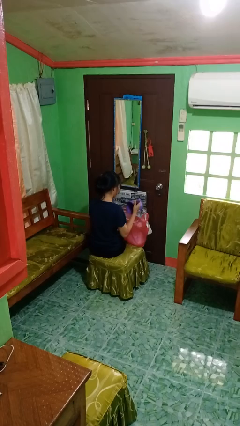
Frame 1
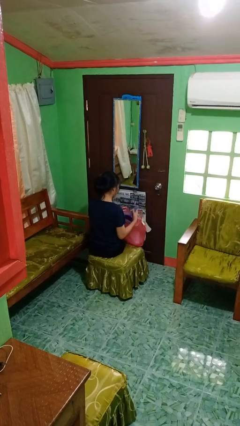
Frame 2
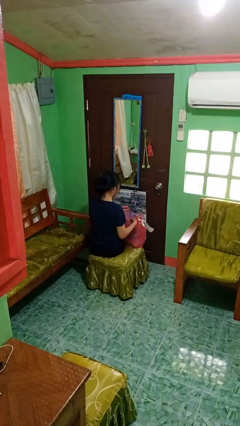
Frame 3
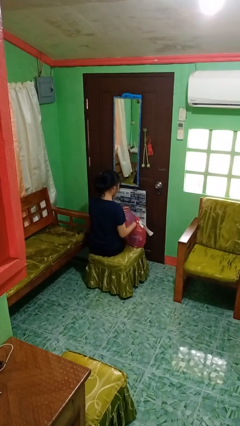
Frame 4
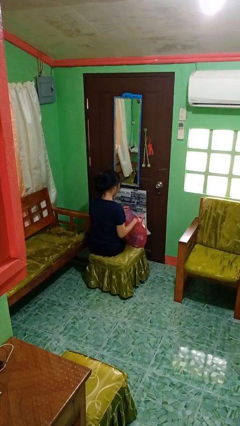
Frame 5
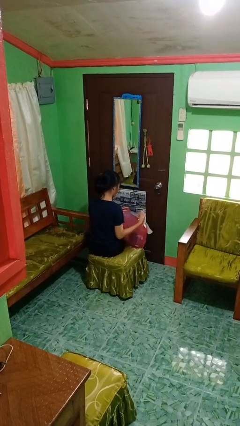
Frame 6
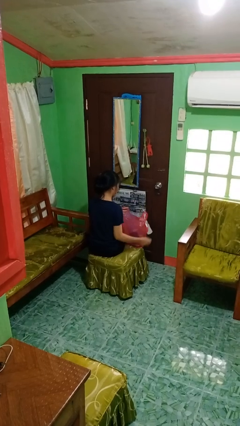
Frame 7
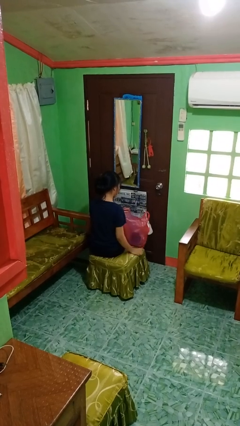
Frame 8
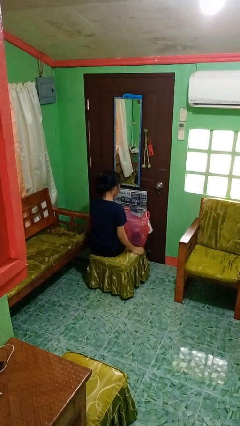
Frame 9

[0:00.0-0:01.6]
person puts object into bag

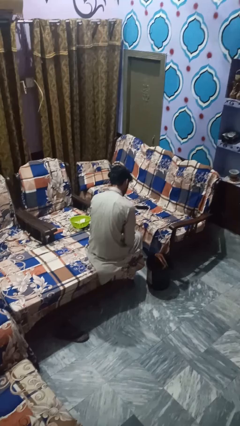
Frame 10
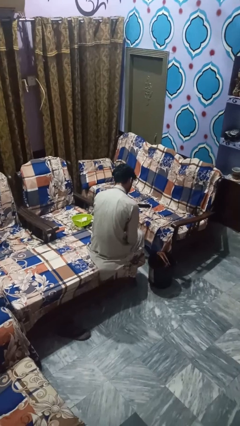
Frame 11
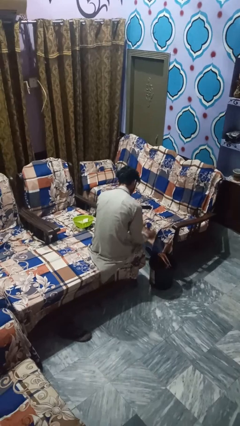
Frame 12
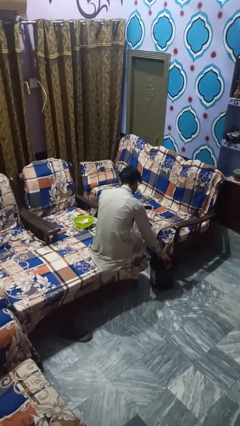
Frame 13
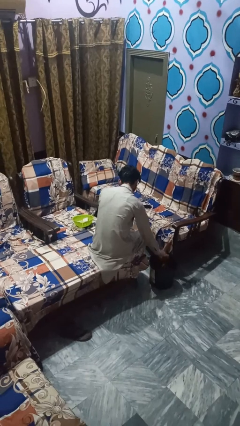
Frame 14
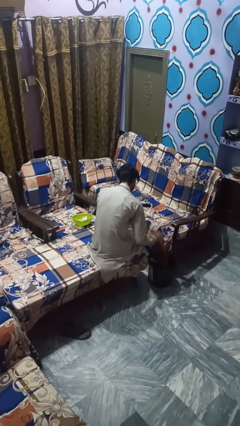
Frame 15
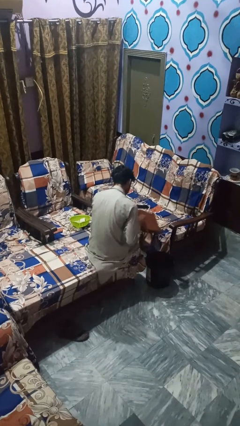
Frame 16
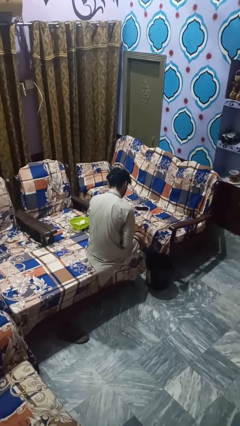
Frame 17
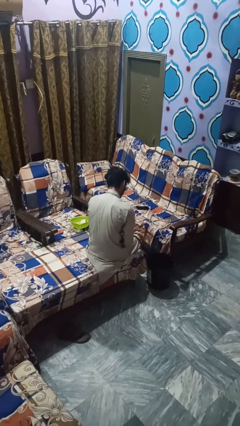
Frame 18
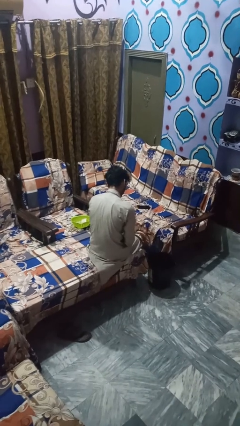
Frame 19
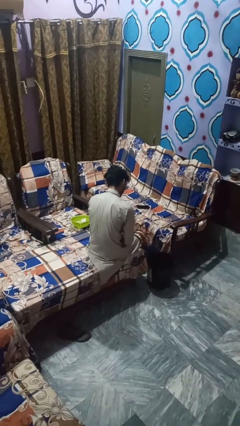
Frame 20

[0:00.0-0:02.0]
person takes object from basket

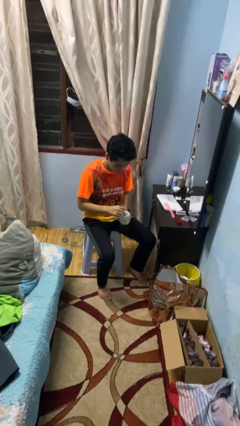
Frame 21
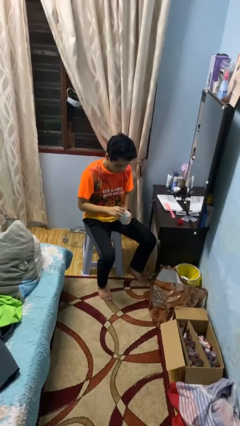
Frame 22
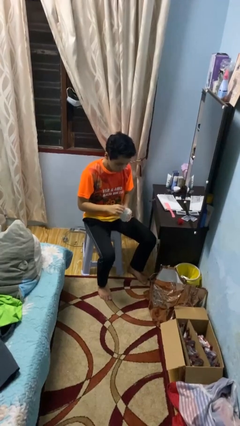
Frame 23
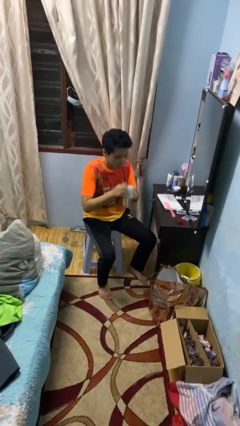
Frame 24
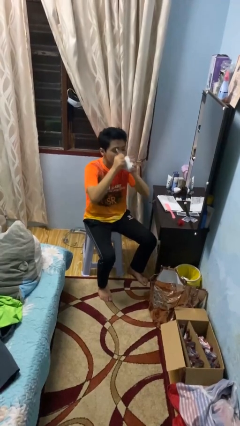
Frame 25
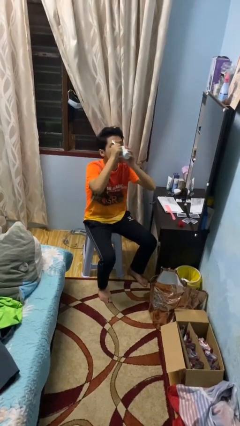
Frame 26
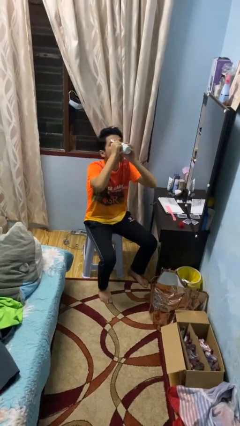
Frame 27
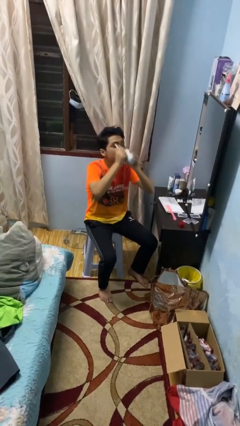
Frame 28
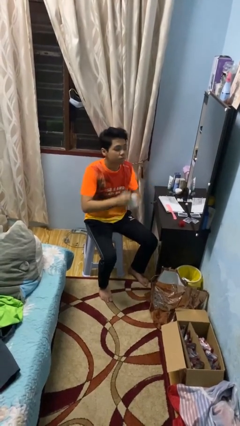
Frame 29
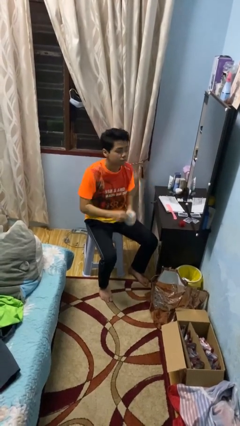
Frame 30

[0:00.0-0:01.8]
person drinks from mug

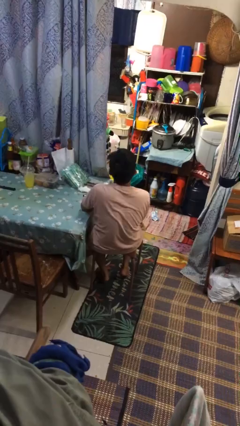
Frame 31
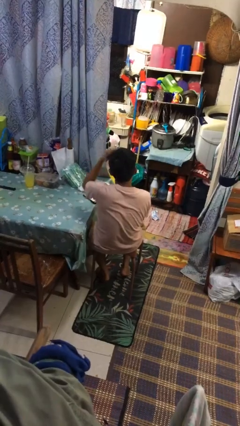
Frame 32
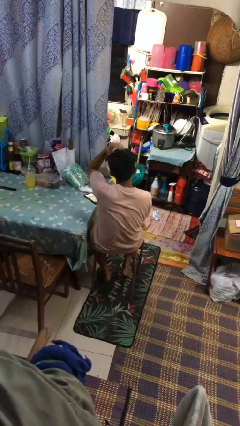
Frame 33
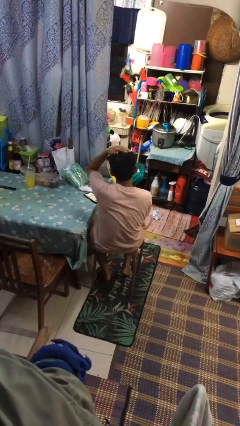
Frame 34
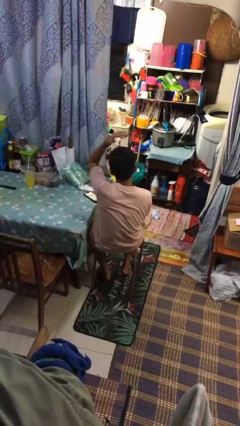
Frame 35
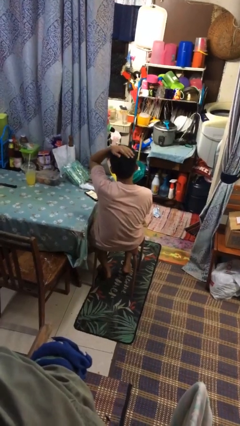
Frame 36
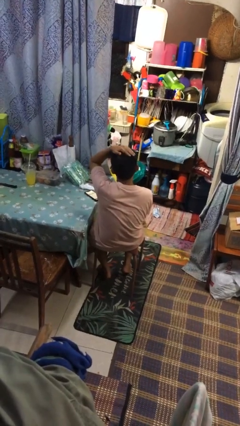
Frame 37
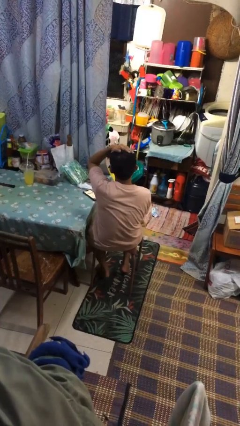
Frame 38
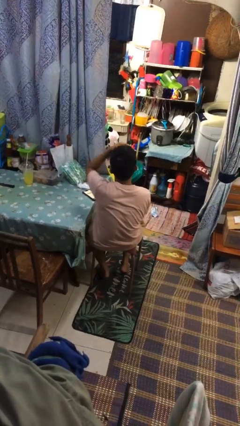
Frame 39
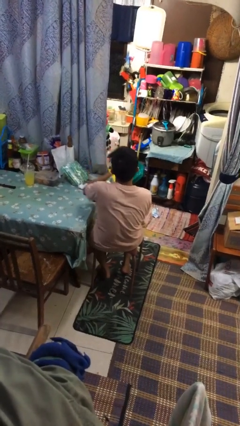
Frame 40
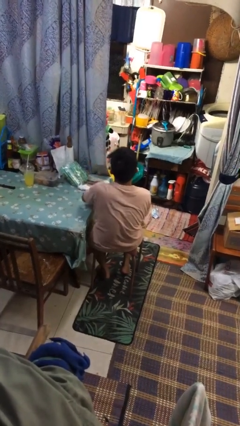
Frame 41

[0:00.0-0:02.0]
person pats head

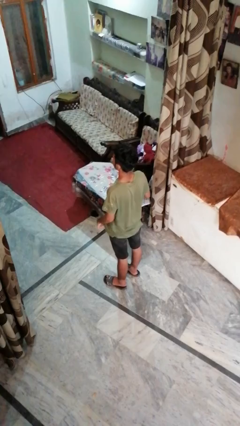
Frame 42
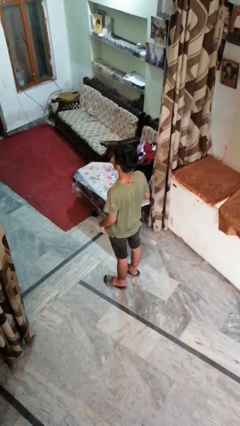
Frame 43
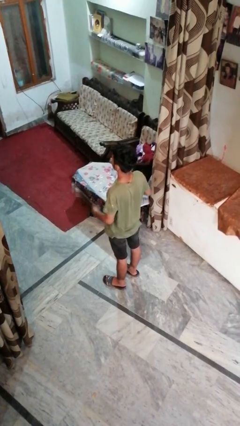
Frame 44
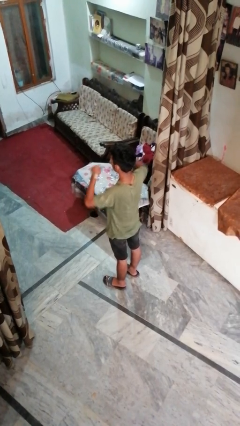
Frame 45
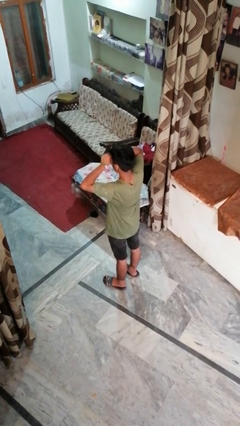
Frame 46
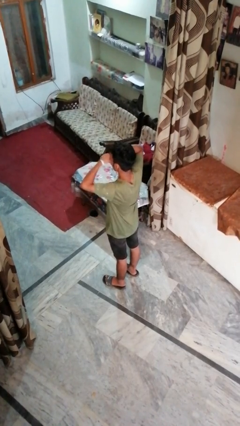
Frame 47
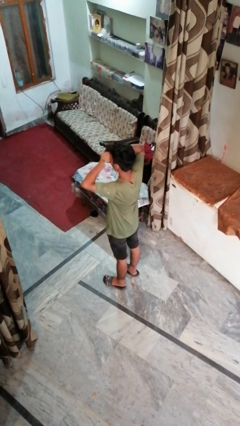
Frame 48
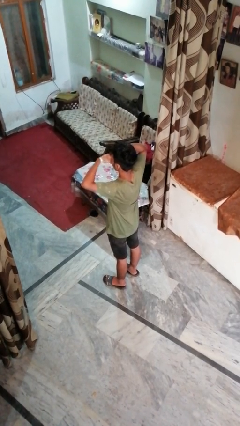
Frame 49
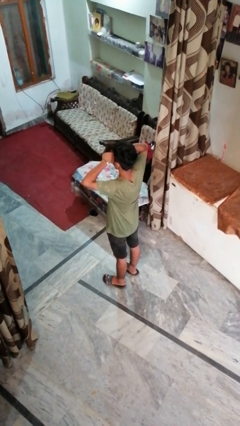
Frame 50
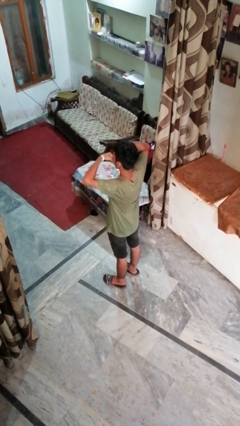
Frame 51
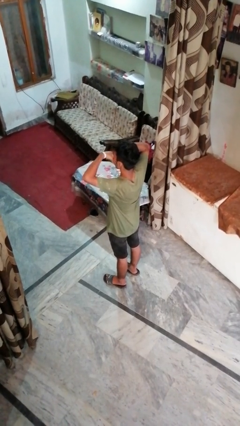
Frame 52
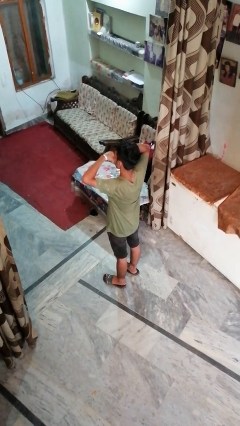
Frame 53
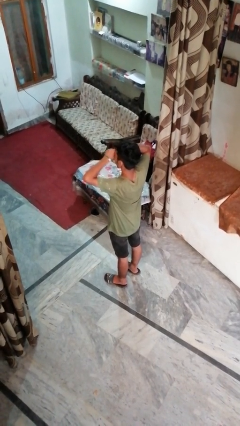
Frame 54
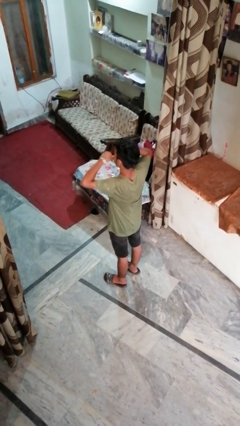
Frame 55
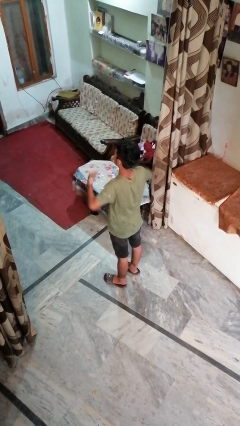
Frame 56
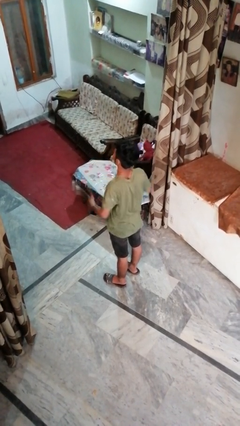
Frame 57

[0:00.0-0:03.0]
person rubs eyes

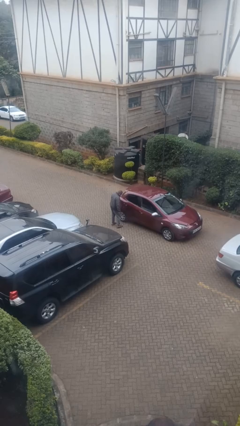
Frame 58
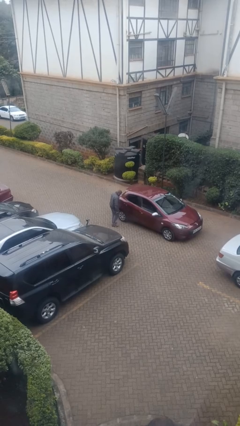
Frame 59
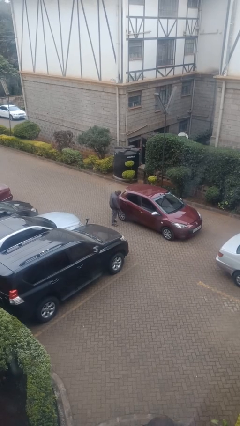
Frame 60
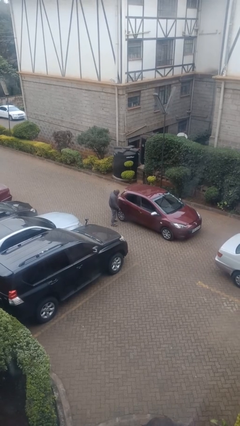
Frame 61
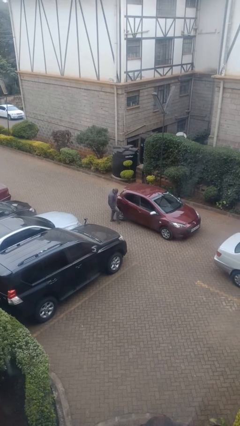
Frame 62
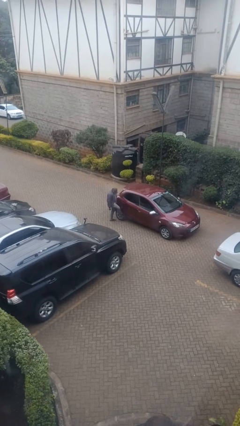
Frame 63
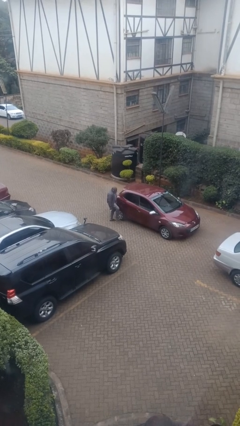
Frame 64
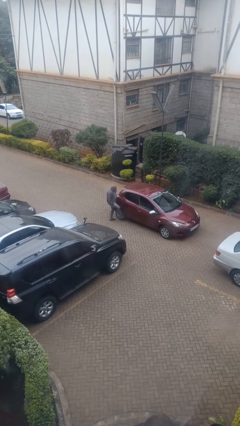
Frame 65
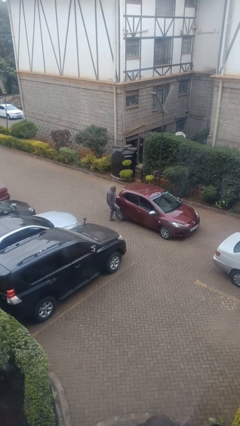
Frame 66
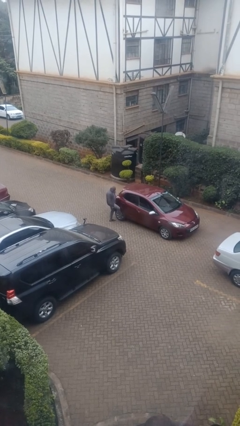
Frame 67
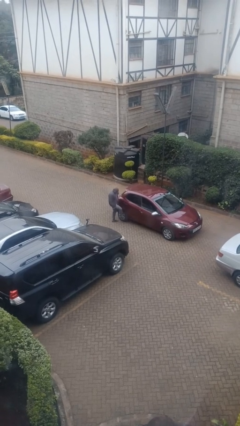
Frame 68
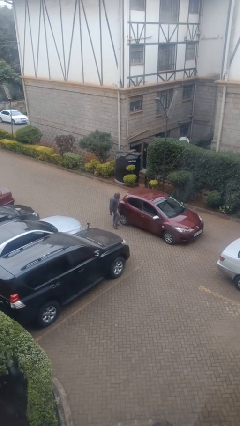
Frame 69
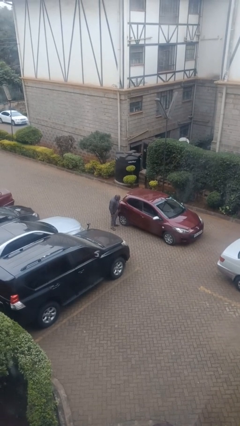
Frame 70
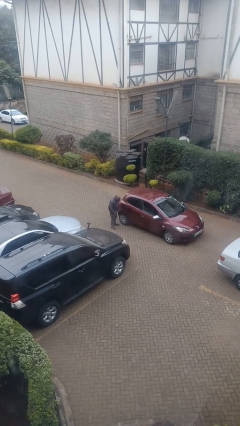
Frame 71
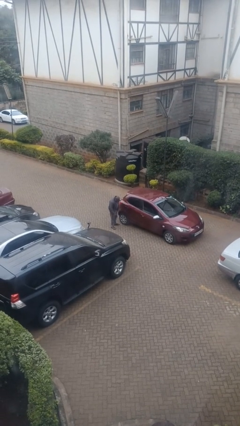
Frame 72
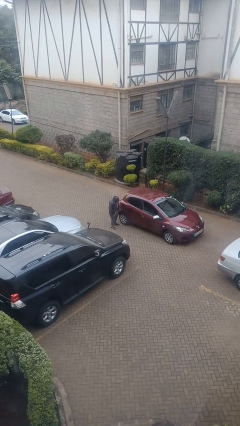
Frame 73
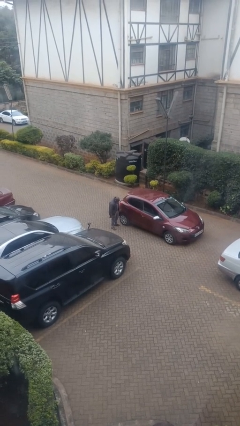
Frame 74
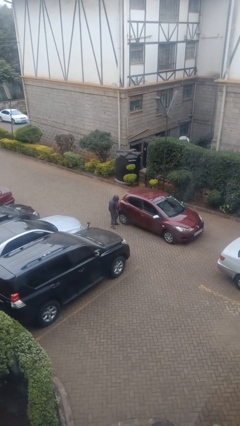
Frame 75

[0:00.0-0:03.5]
person kicks car tires

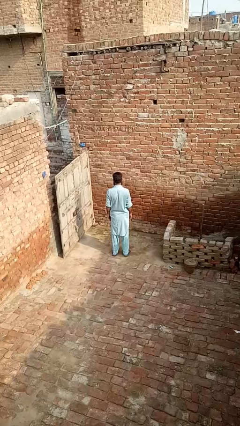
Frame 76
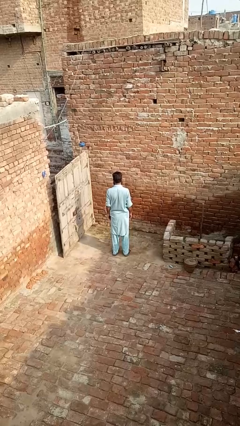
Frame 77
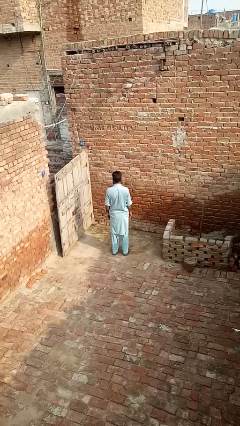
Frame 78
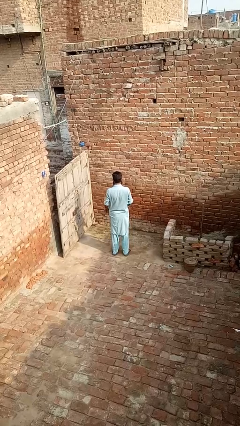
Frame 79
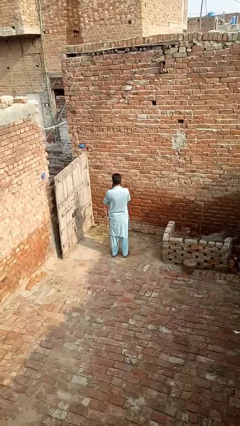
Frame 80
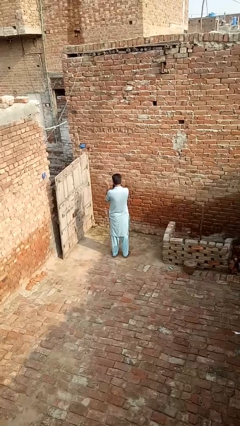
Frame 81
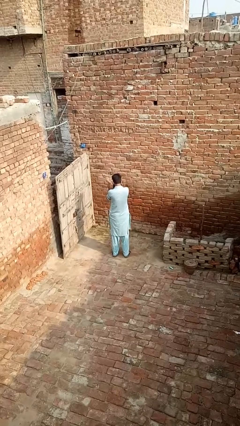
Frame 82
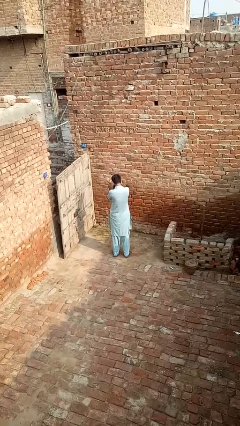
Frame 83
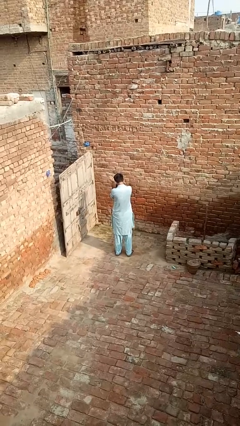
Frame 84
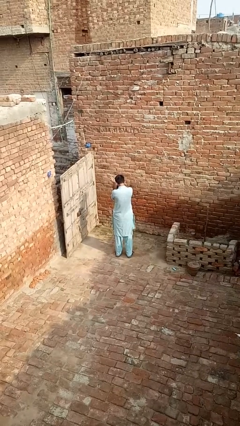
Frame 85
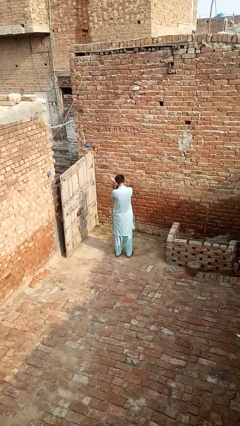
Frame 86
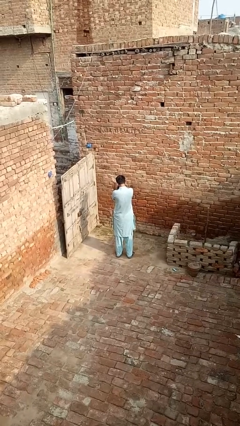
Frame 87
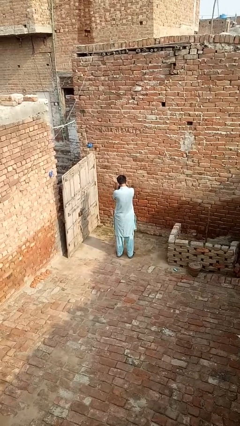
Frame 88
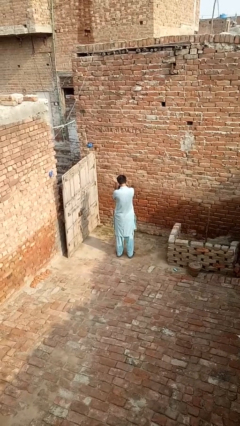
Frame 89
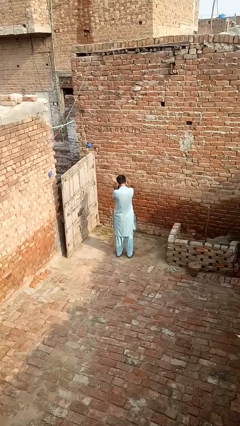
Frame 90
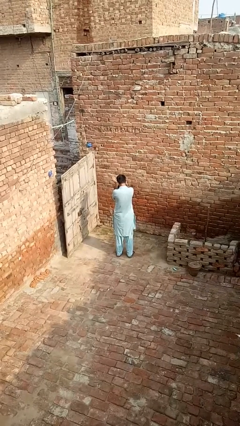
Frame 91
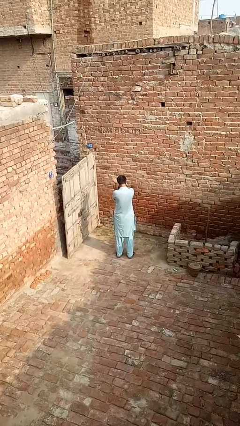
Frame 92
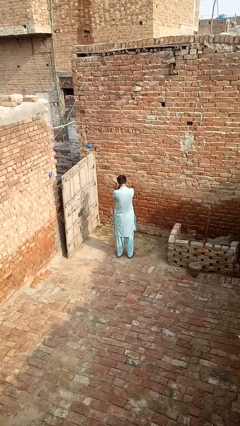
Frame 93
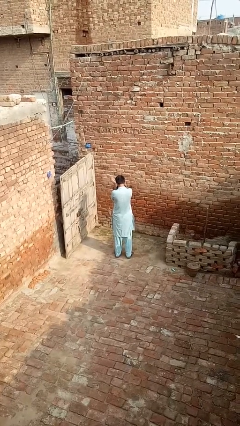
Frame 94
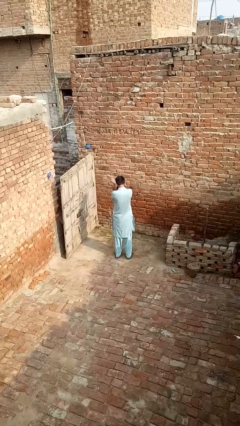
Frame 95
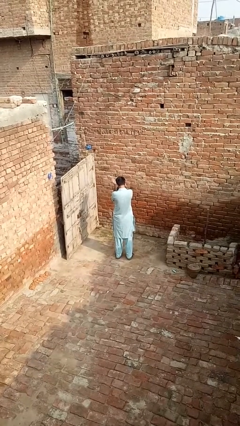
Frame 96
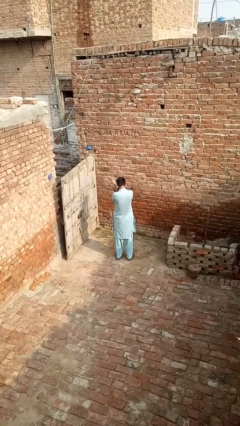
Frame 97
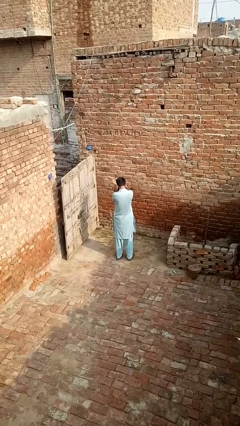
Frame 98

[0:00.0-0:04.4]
person prays
